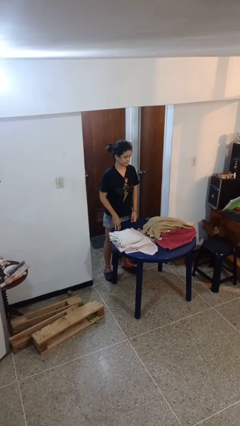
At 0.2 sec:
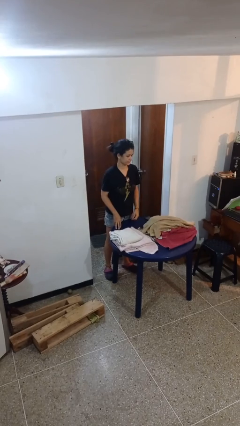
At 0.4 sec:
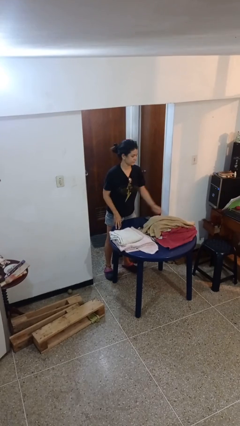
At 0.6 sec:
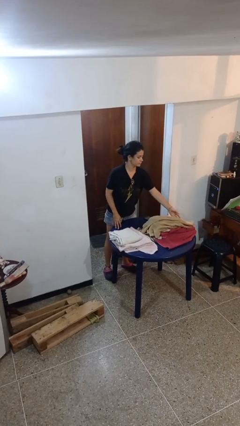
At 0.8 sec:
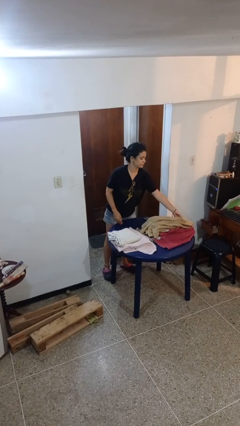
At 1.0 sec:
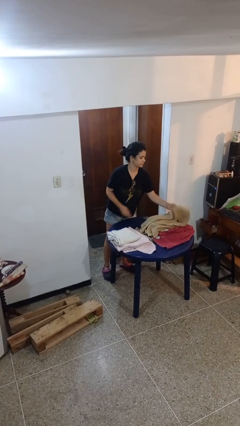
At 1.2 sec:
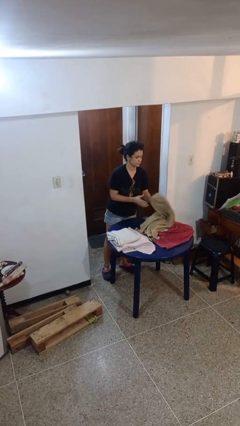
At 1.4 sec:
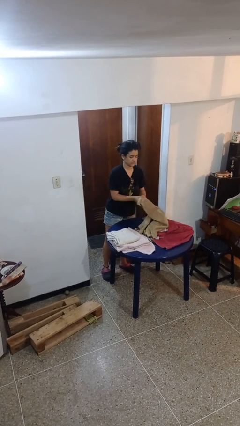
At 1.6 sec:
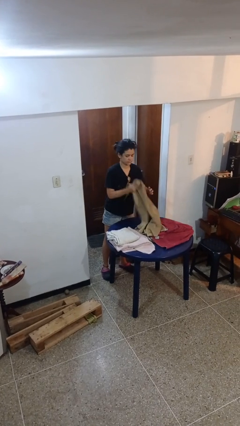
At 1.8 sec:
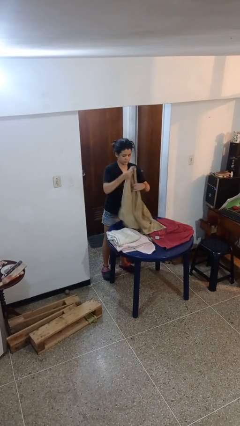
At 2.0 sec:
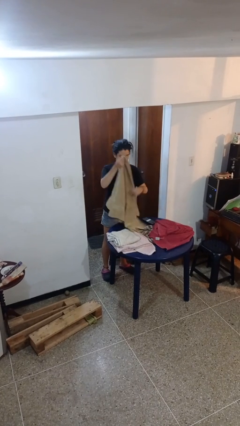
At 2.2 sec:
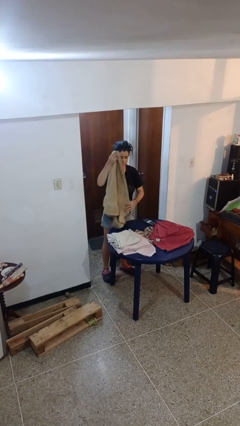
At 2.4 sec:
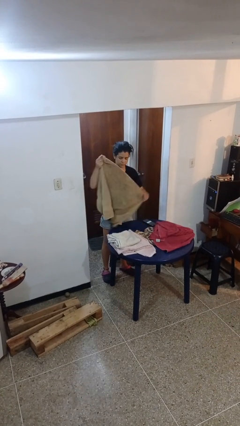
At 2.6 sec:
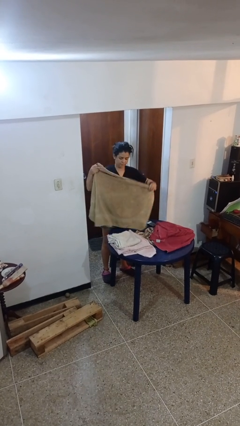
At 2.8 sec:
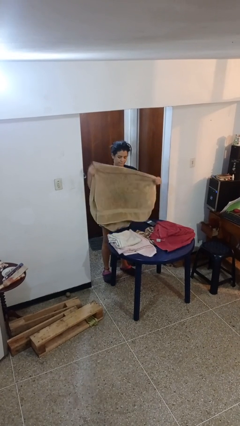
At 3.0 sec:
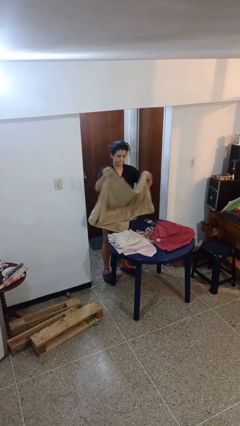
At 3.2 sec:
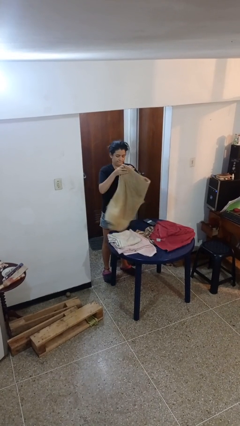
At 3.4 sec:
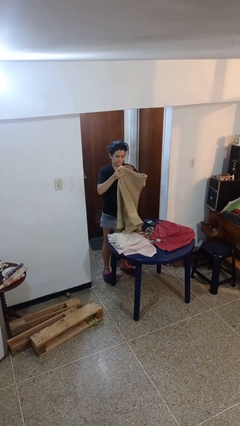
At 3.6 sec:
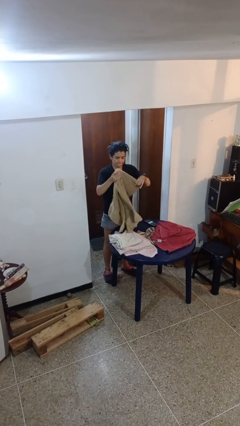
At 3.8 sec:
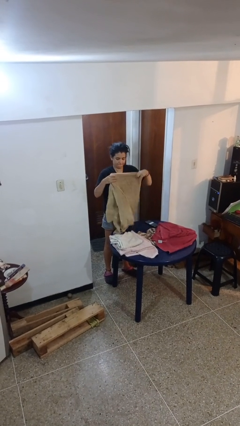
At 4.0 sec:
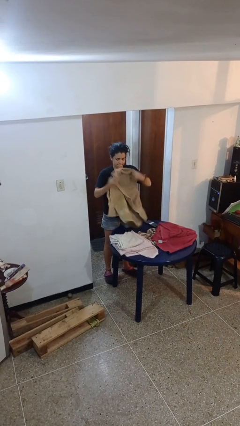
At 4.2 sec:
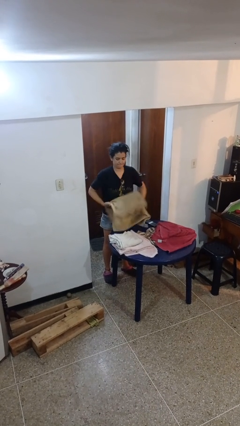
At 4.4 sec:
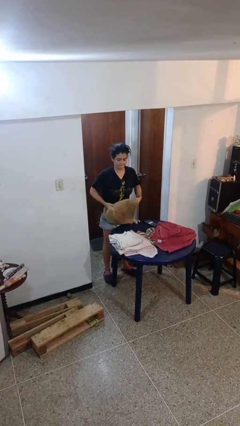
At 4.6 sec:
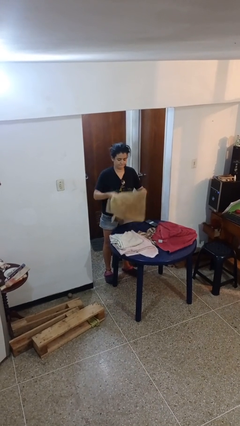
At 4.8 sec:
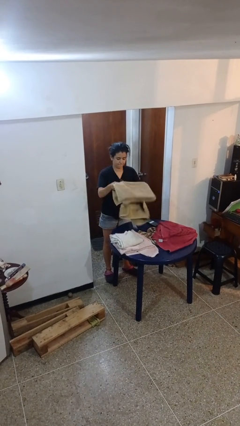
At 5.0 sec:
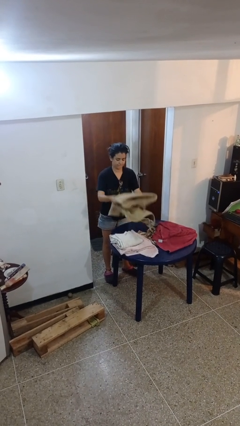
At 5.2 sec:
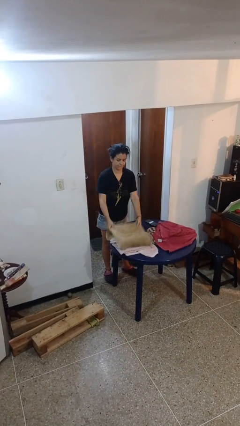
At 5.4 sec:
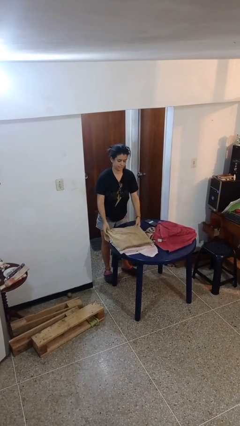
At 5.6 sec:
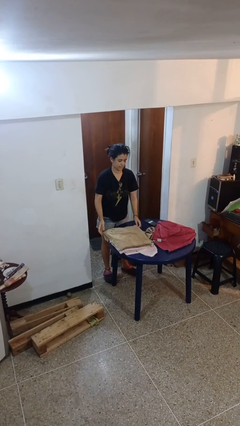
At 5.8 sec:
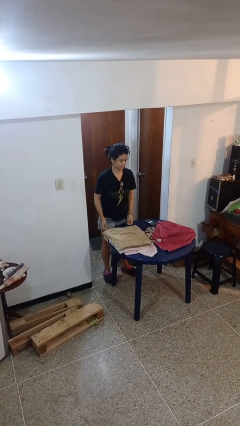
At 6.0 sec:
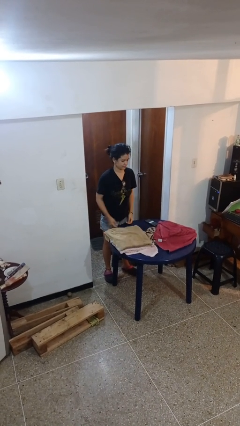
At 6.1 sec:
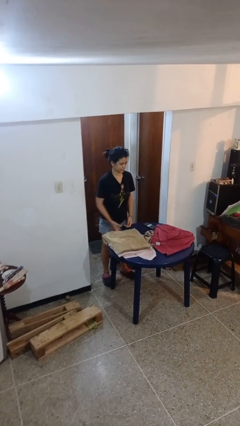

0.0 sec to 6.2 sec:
person folds towel

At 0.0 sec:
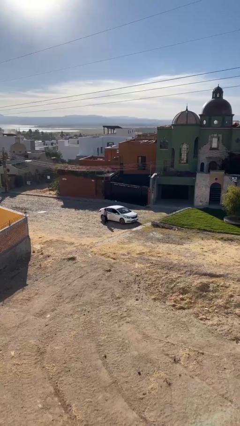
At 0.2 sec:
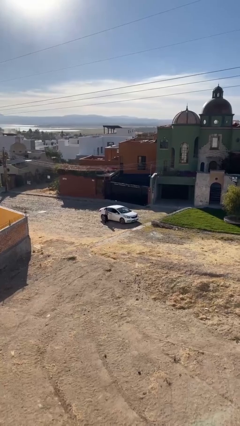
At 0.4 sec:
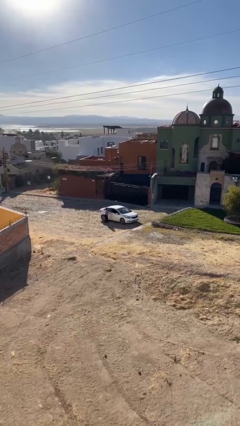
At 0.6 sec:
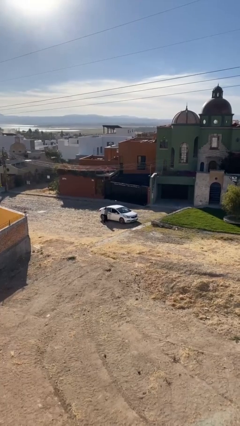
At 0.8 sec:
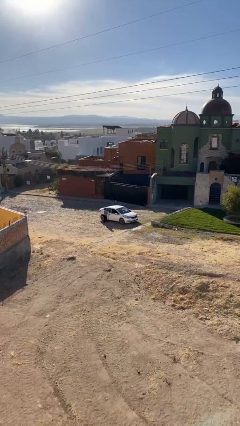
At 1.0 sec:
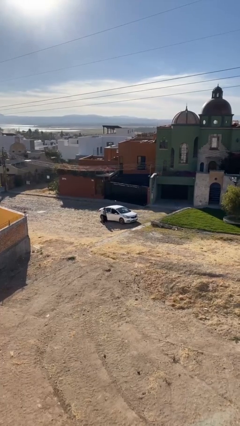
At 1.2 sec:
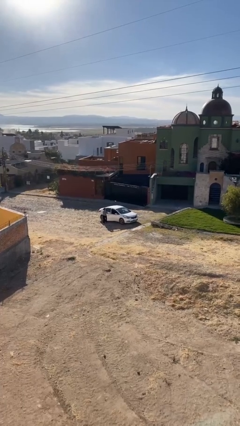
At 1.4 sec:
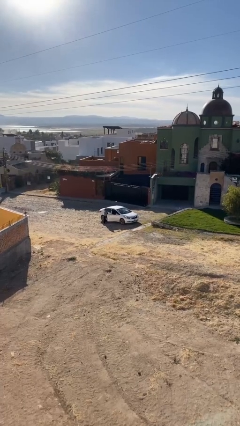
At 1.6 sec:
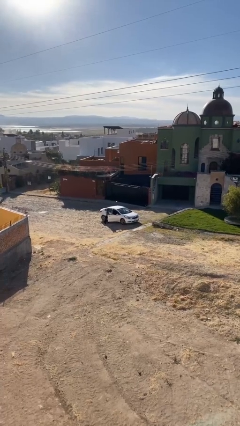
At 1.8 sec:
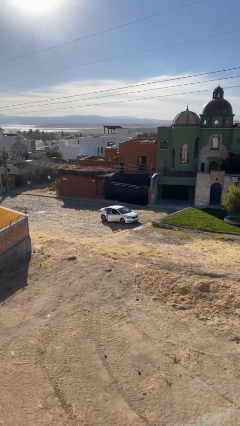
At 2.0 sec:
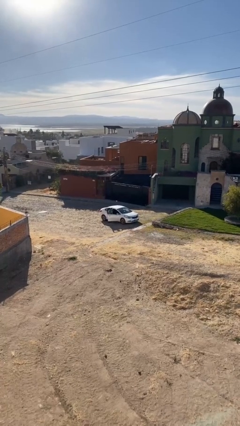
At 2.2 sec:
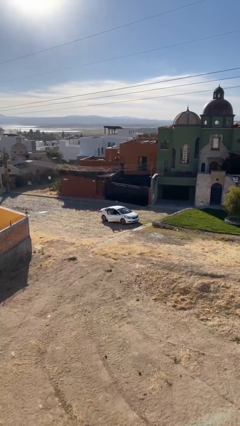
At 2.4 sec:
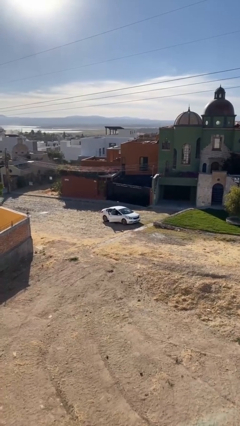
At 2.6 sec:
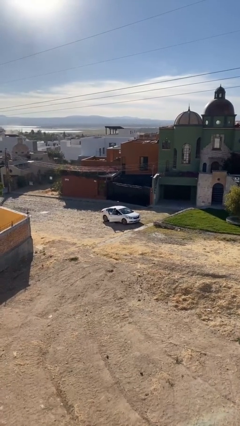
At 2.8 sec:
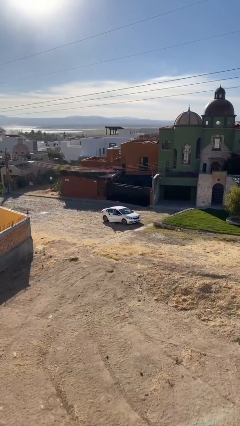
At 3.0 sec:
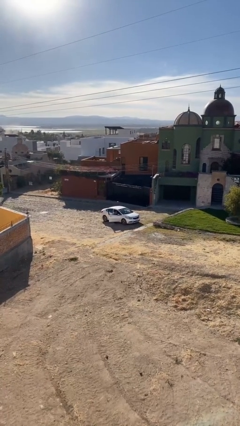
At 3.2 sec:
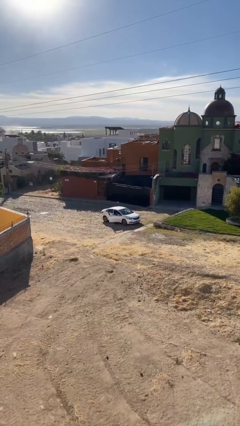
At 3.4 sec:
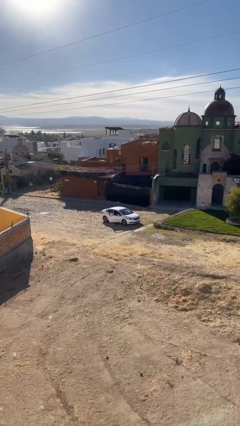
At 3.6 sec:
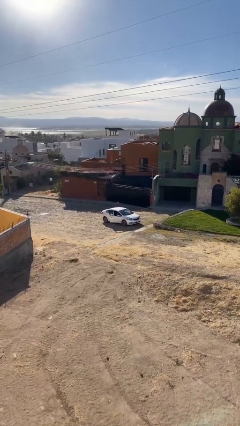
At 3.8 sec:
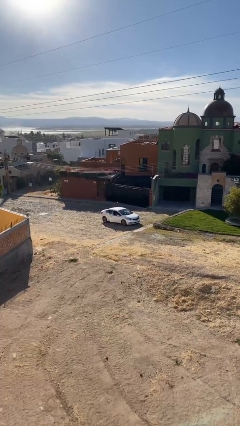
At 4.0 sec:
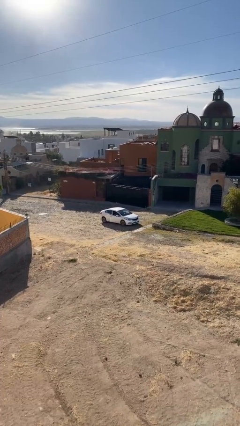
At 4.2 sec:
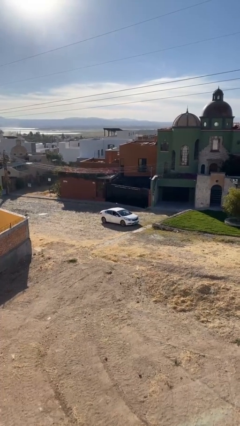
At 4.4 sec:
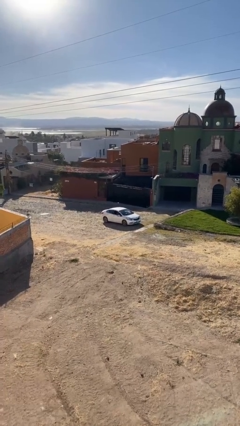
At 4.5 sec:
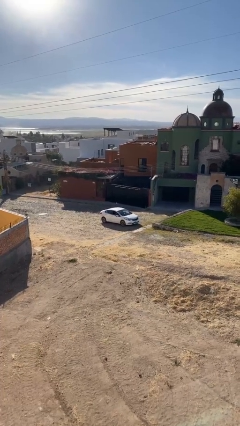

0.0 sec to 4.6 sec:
car picks up person

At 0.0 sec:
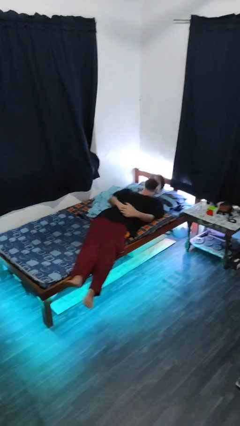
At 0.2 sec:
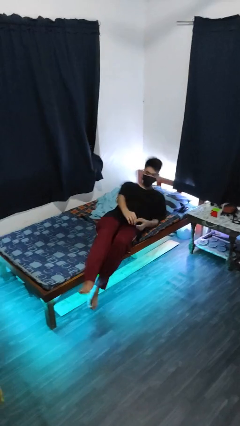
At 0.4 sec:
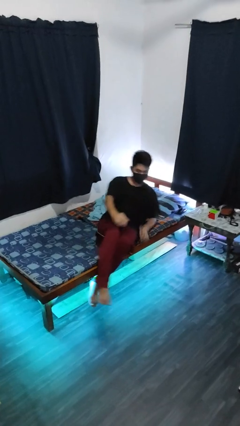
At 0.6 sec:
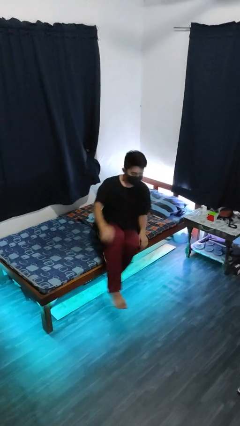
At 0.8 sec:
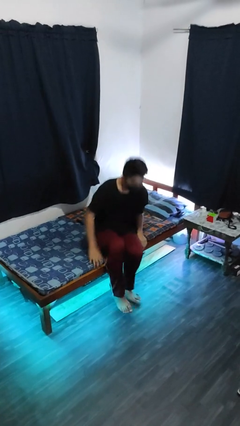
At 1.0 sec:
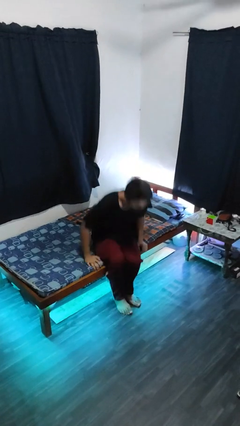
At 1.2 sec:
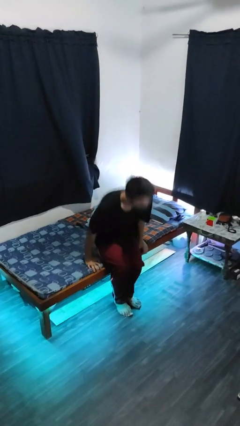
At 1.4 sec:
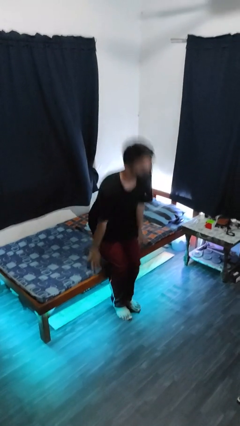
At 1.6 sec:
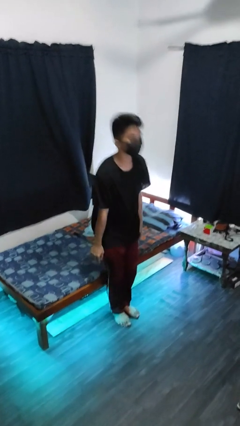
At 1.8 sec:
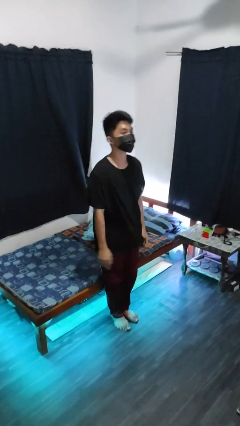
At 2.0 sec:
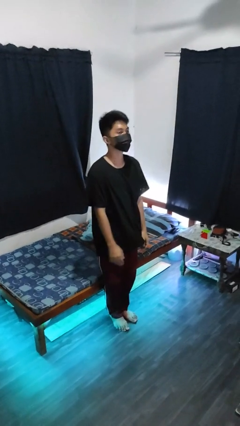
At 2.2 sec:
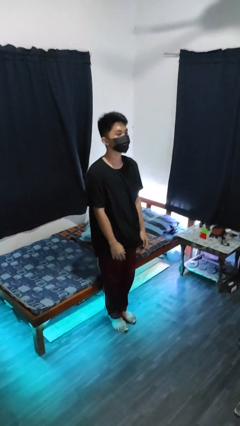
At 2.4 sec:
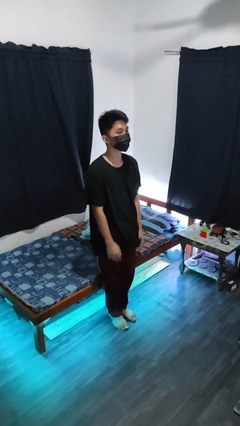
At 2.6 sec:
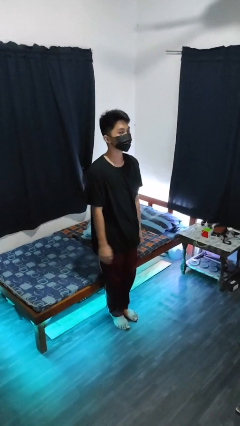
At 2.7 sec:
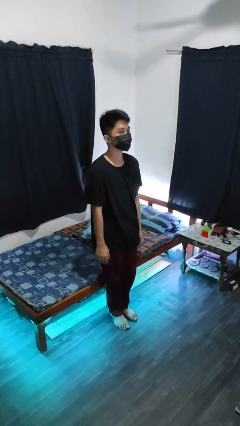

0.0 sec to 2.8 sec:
person stands up

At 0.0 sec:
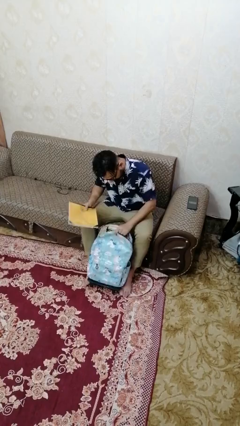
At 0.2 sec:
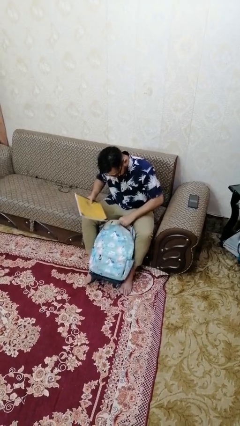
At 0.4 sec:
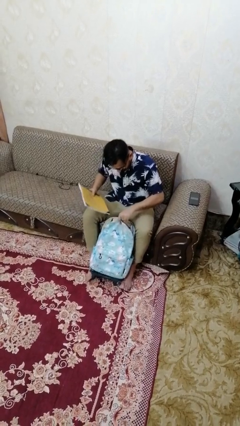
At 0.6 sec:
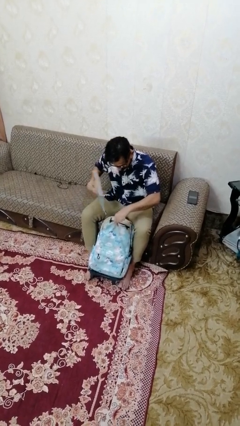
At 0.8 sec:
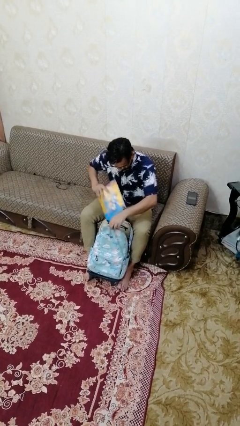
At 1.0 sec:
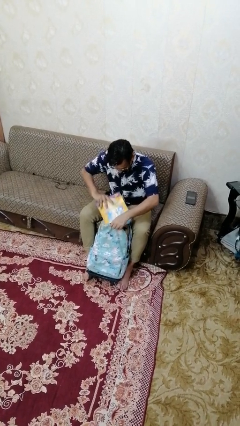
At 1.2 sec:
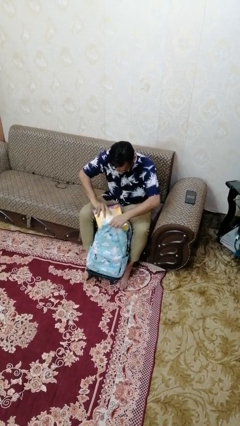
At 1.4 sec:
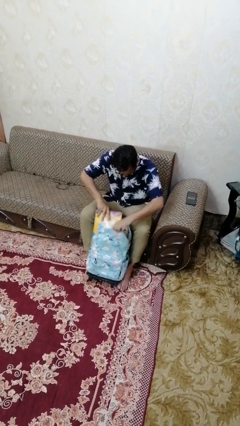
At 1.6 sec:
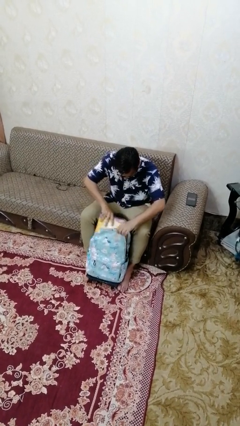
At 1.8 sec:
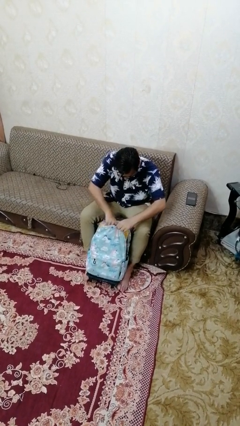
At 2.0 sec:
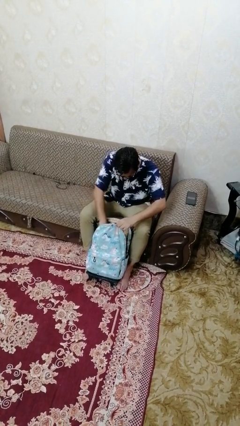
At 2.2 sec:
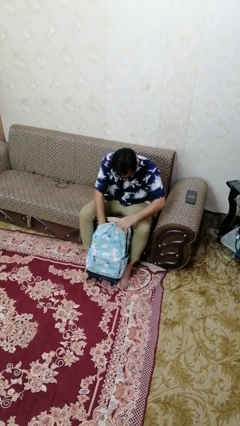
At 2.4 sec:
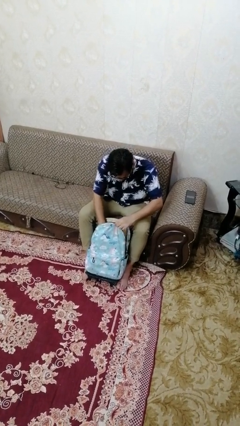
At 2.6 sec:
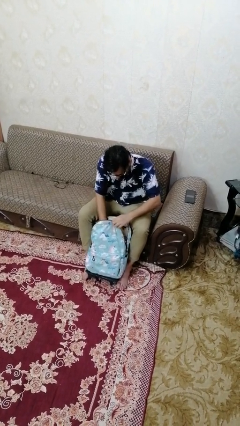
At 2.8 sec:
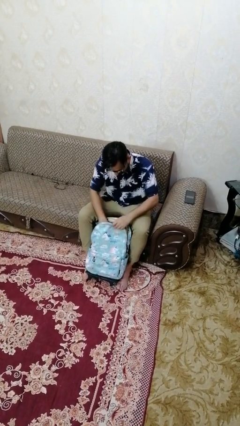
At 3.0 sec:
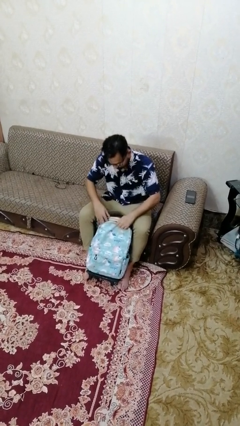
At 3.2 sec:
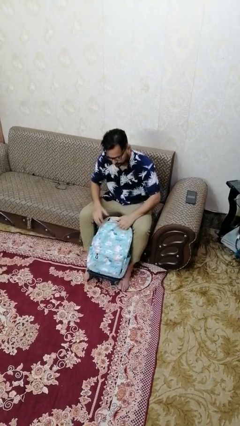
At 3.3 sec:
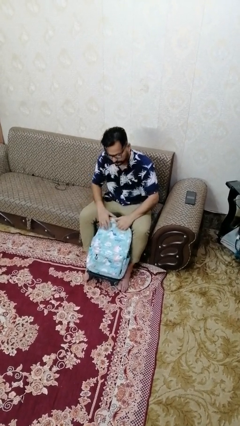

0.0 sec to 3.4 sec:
person puts object into backpack

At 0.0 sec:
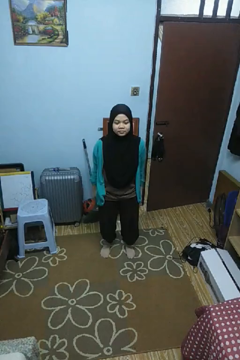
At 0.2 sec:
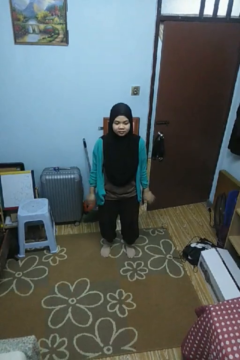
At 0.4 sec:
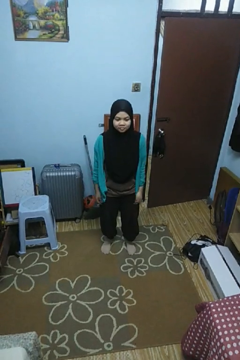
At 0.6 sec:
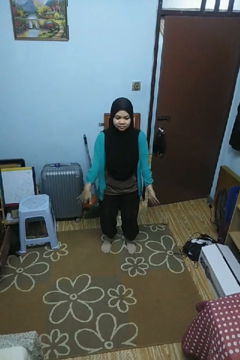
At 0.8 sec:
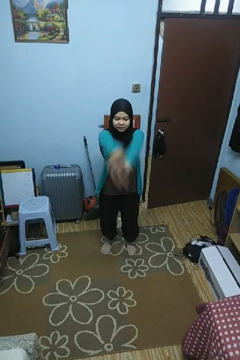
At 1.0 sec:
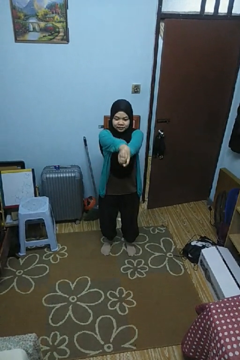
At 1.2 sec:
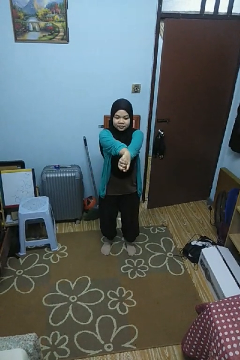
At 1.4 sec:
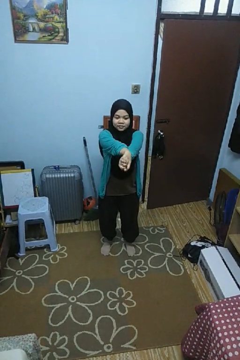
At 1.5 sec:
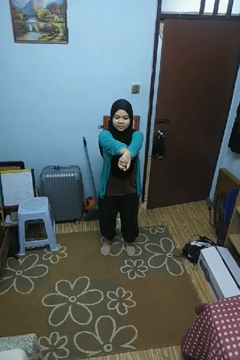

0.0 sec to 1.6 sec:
person crosses arms
